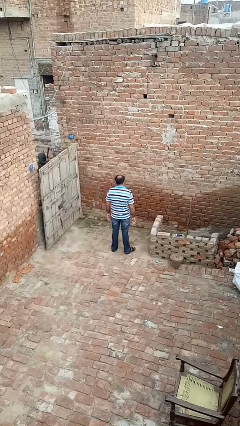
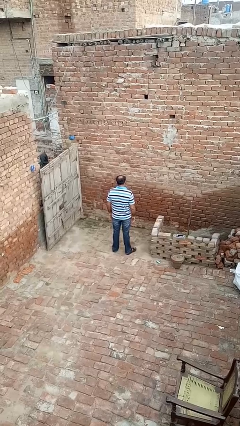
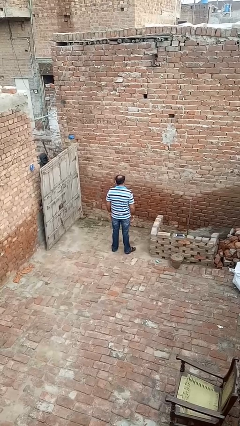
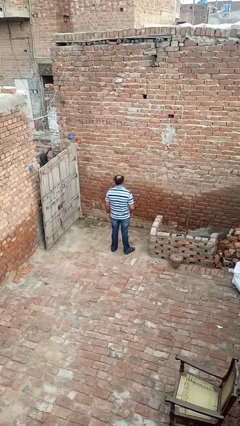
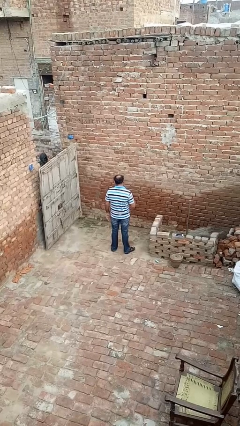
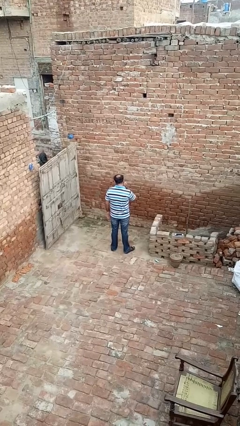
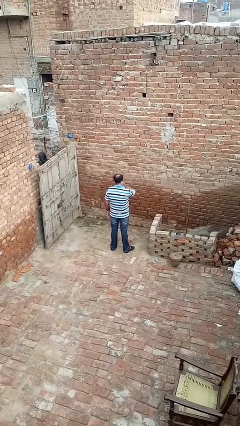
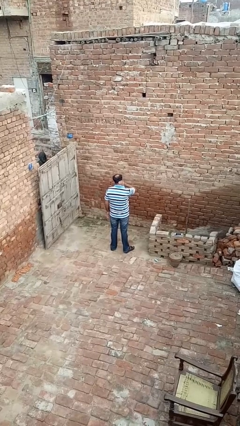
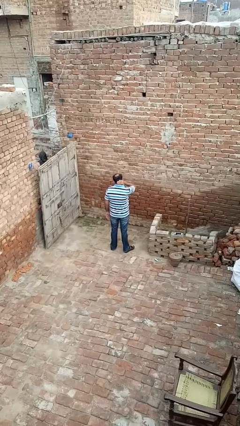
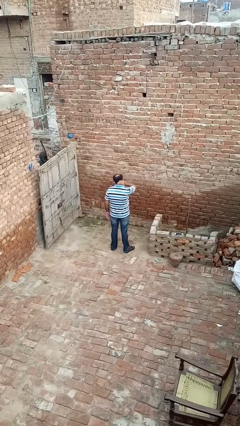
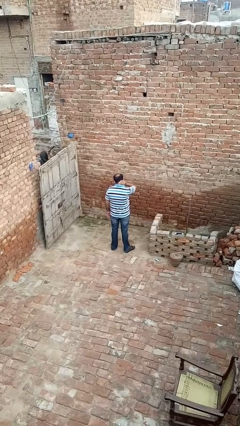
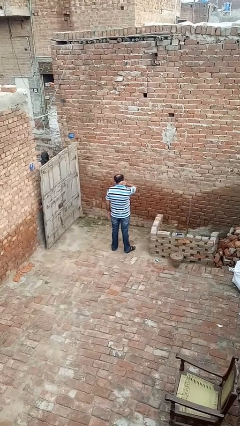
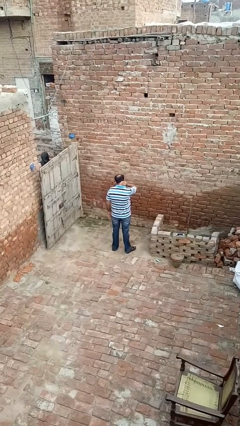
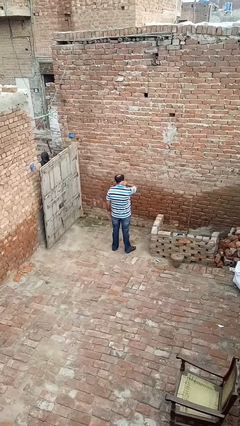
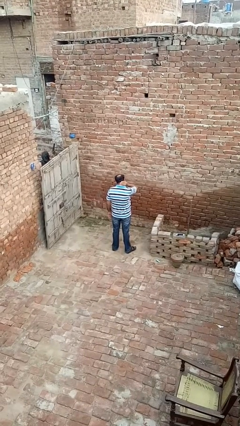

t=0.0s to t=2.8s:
person rubs neck

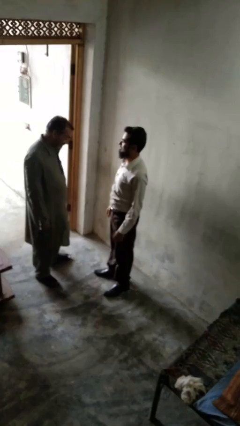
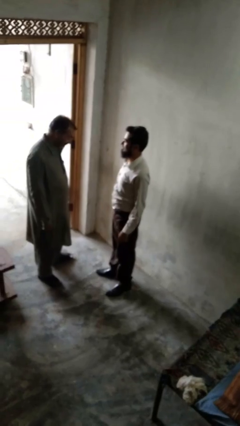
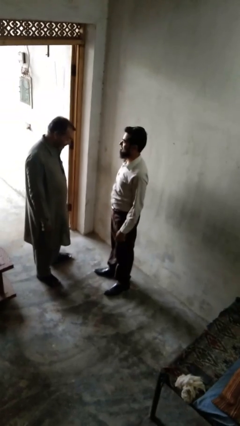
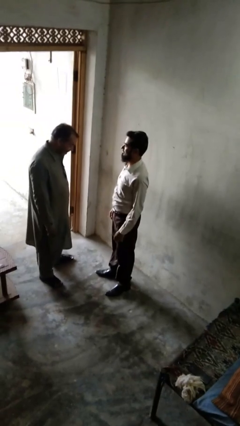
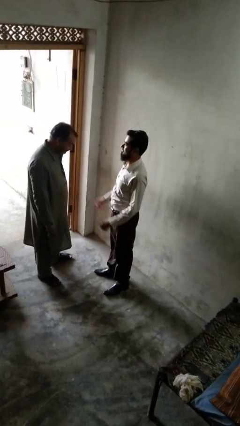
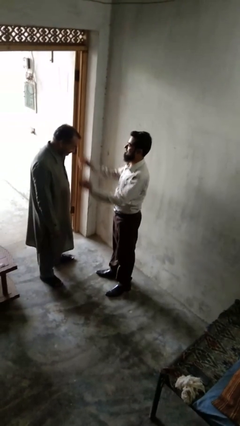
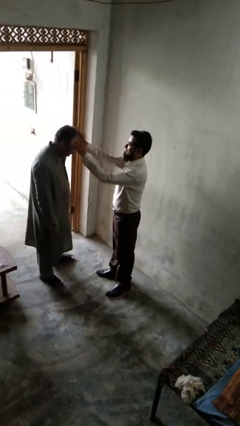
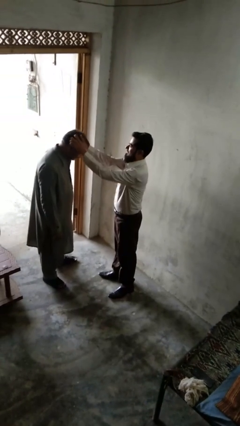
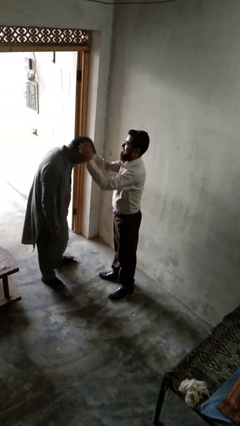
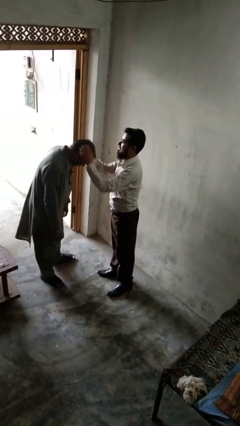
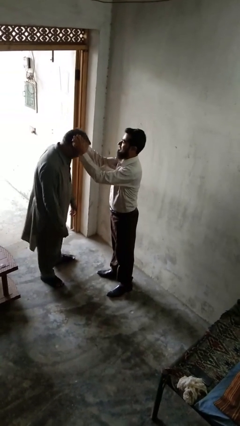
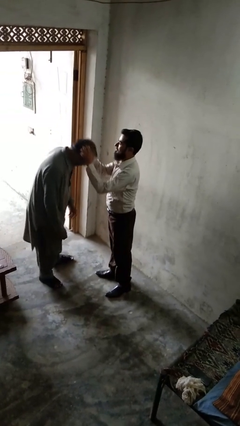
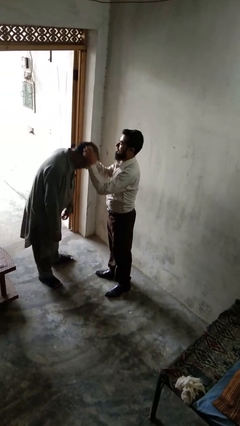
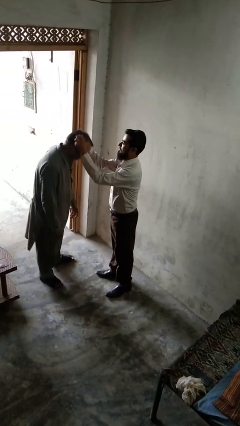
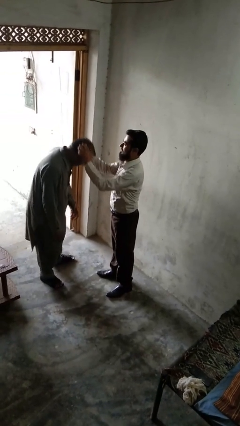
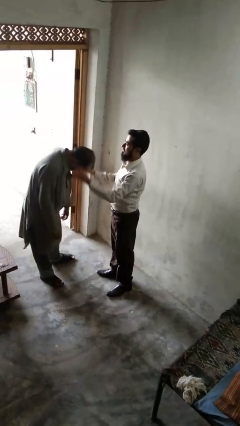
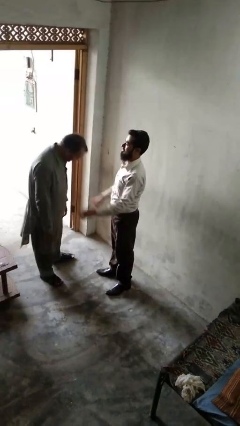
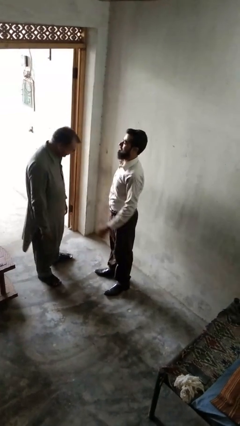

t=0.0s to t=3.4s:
person grabs person by hair

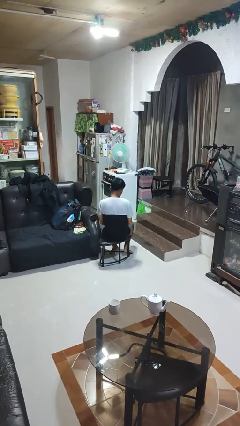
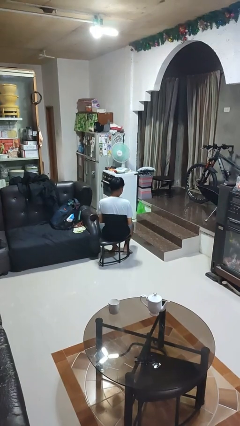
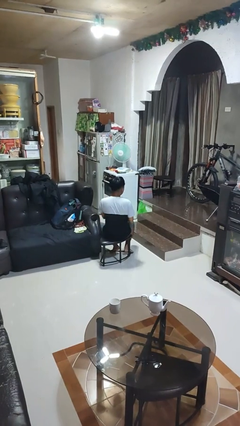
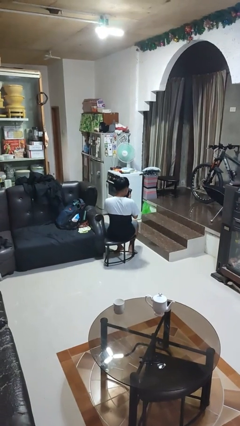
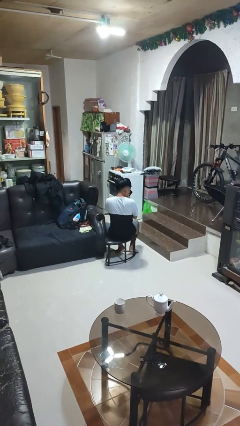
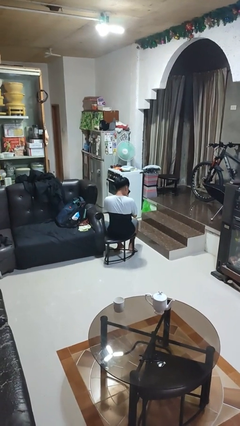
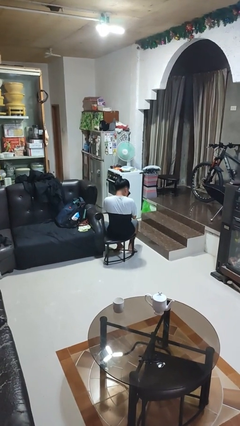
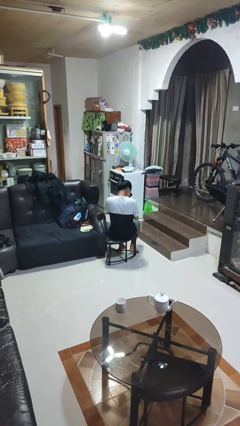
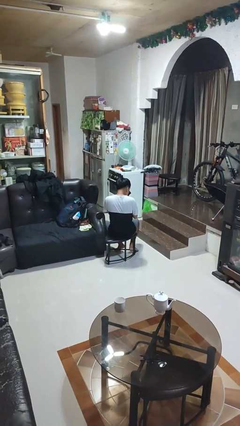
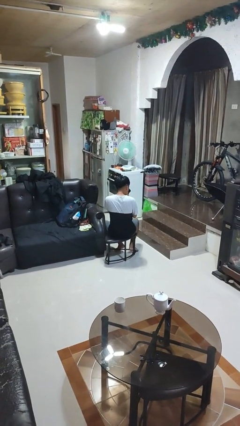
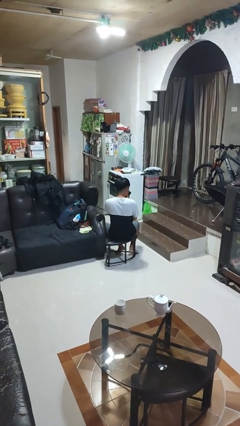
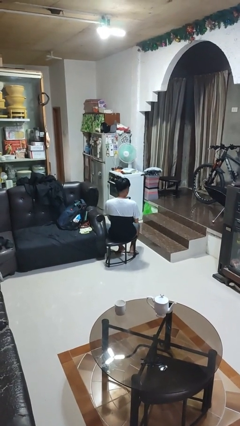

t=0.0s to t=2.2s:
person blows nose

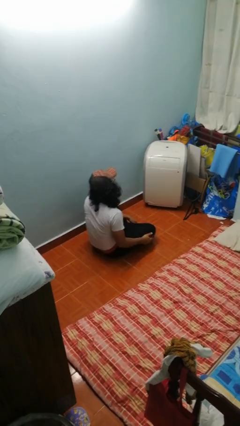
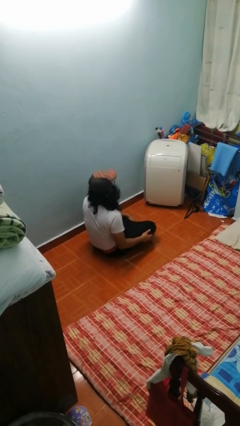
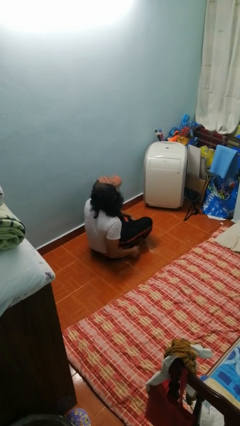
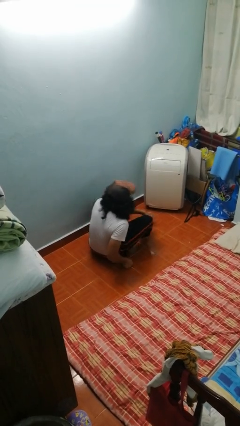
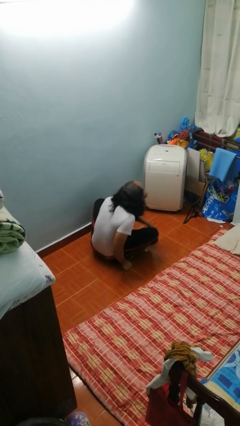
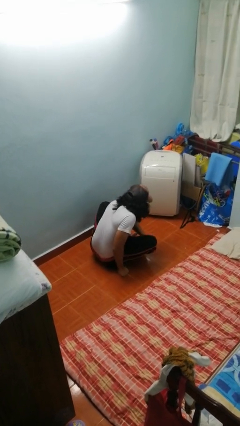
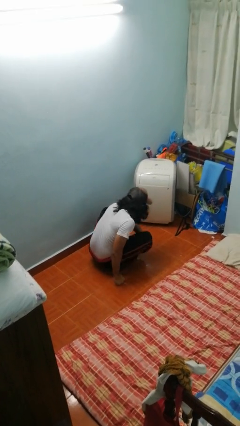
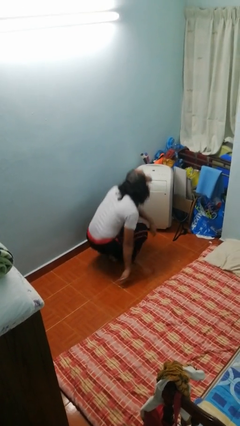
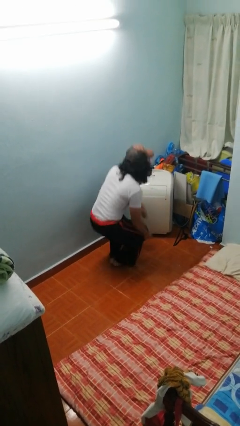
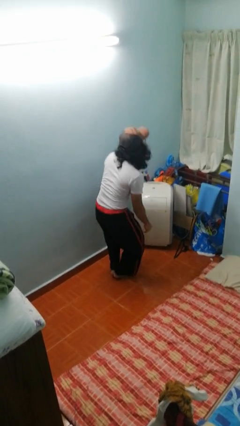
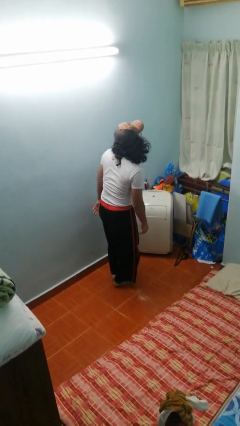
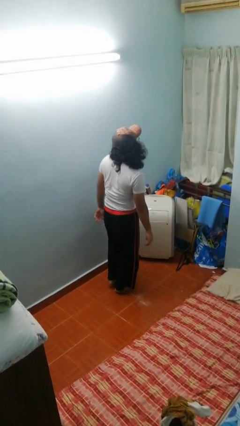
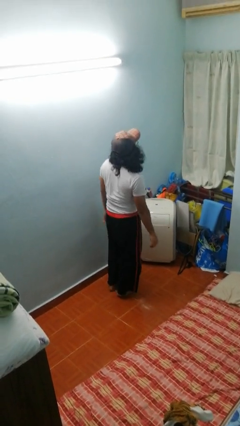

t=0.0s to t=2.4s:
person stands up from floor

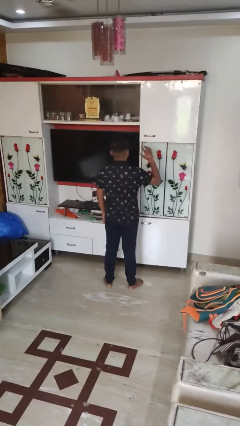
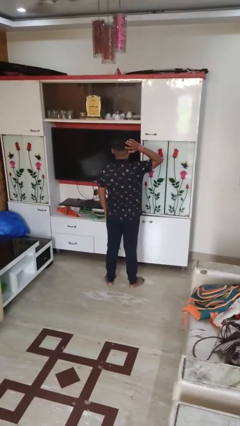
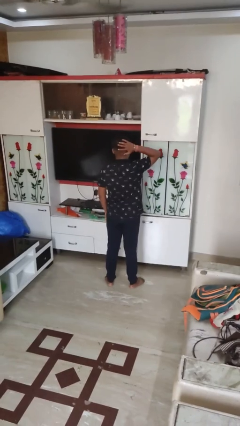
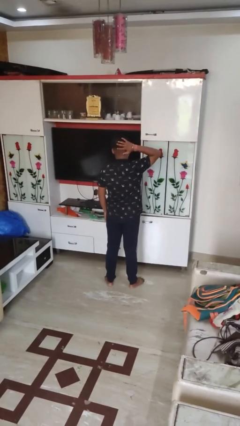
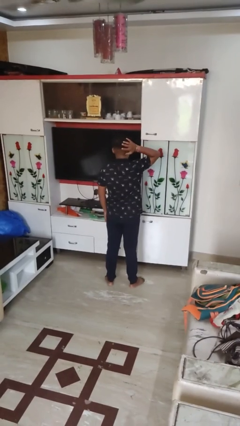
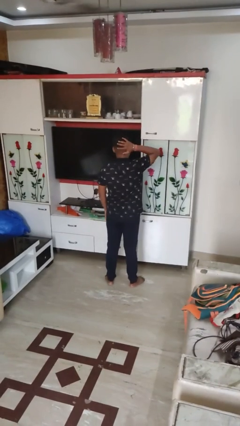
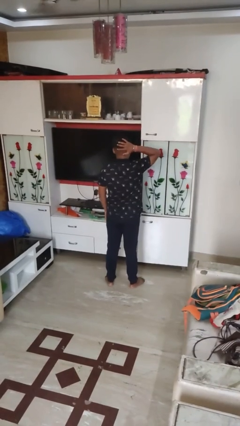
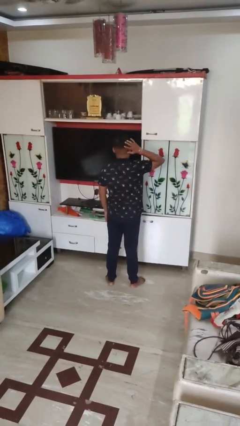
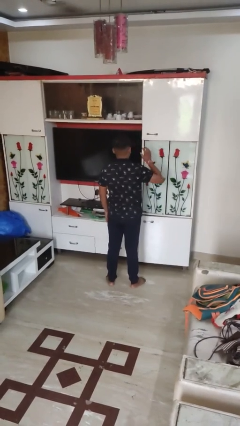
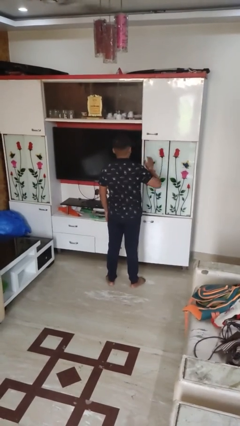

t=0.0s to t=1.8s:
person pats head

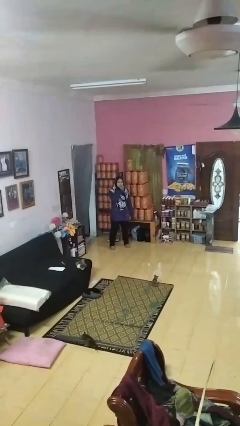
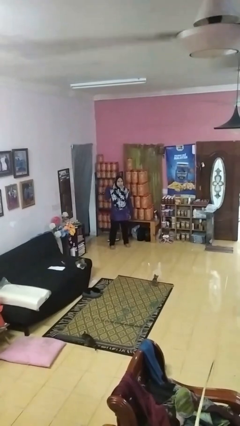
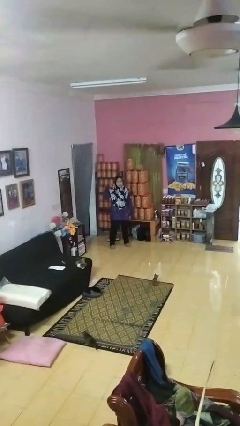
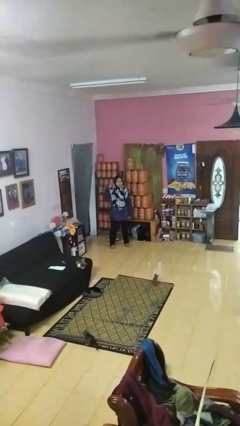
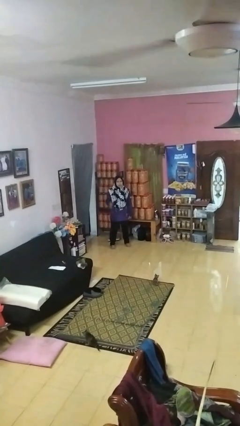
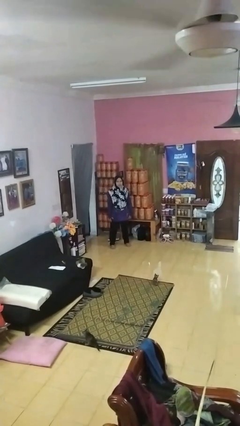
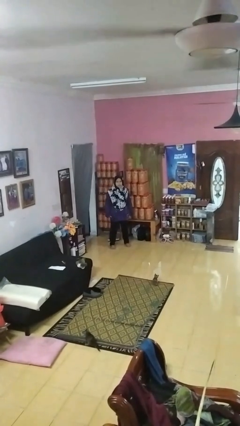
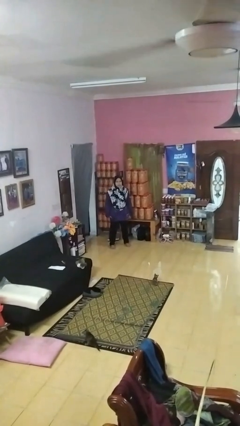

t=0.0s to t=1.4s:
person gestures cut

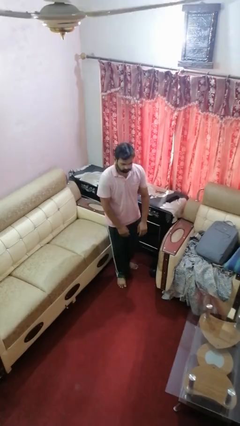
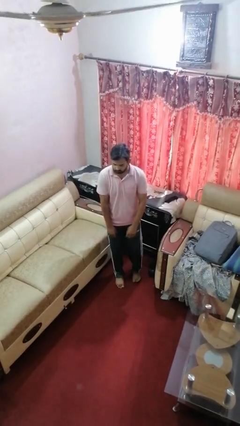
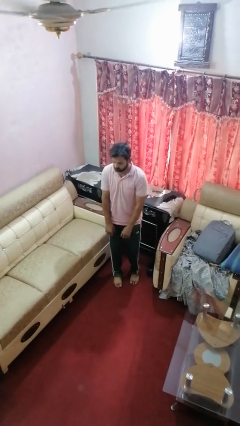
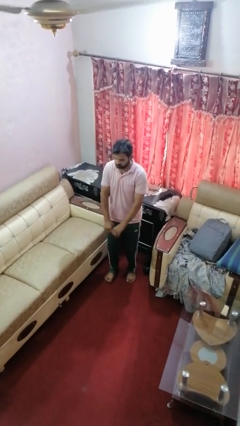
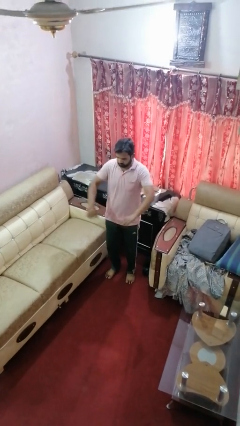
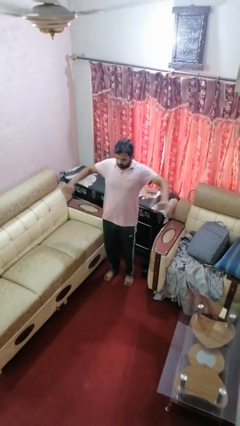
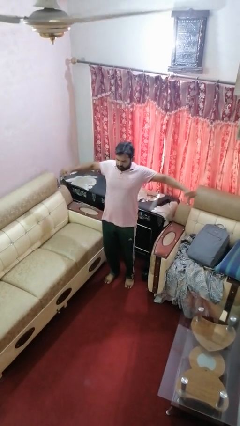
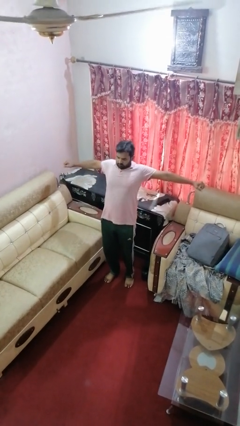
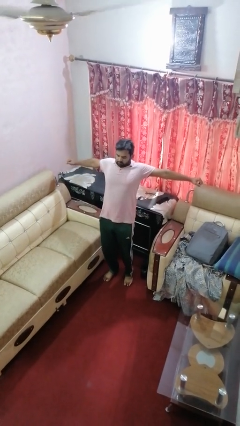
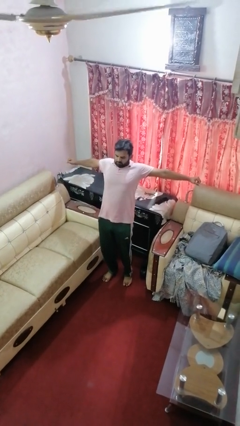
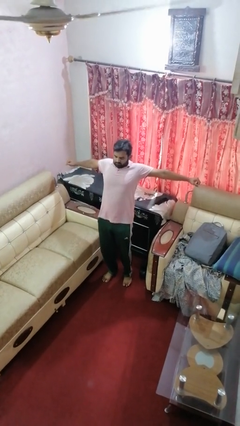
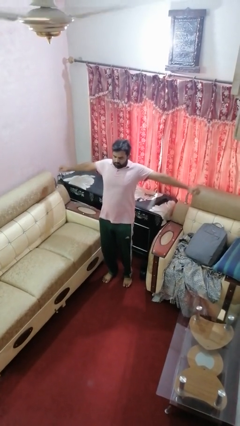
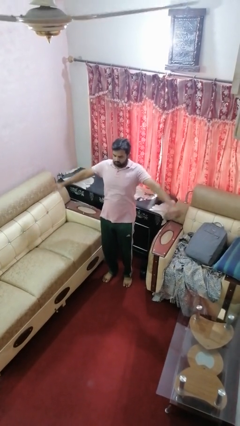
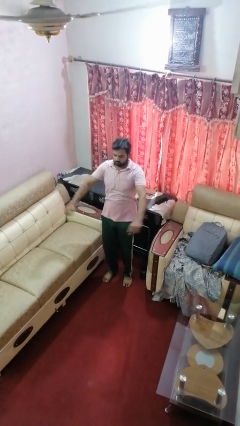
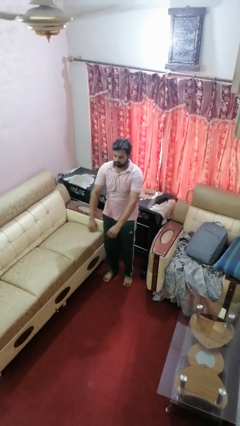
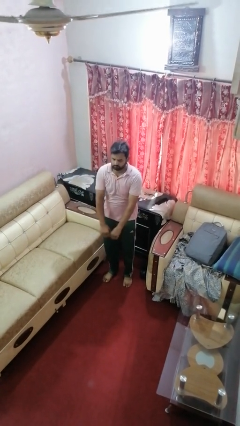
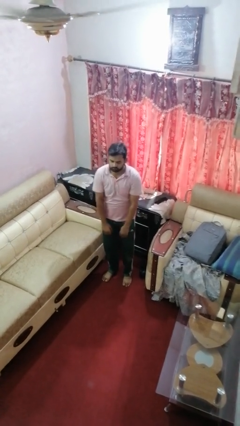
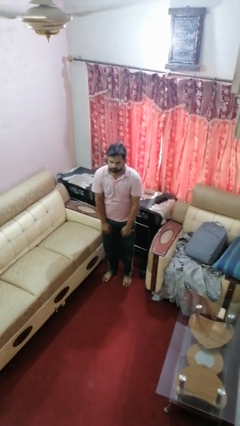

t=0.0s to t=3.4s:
person stretches arms to side
